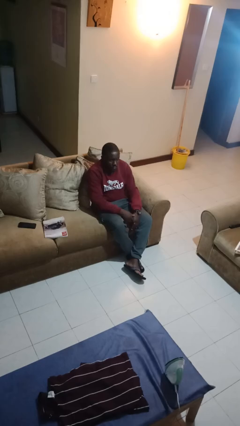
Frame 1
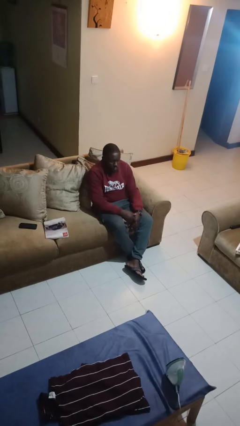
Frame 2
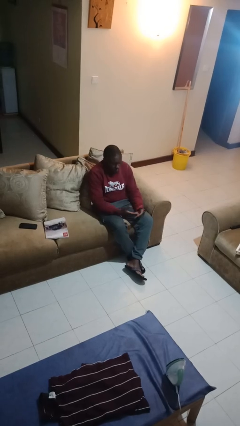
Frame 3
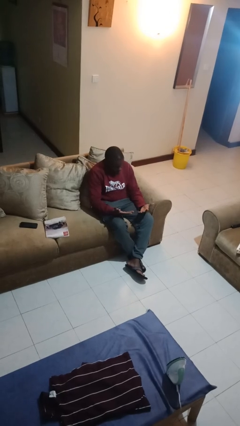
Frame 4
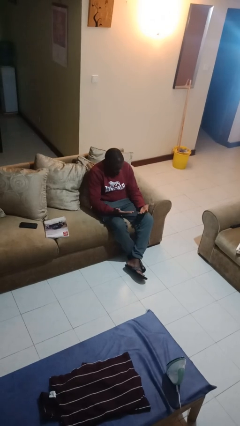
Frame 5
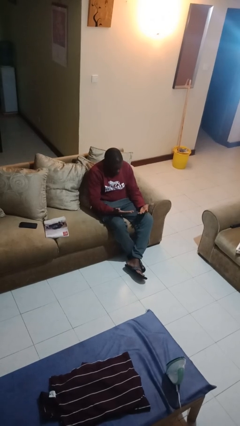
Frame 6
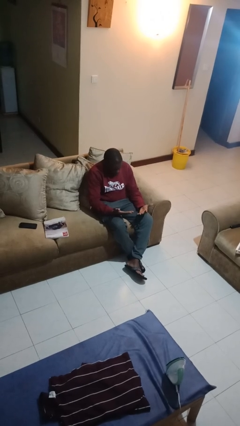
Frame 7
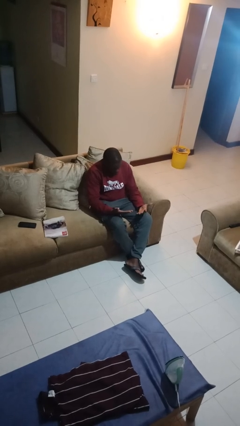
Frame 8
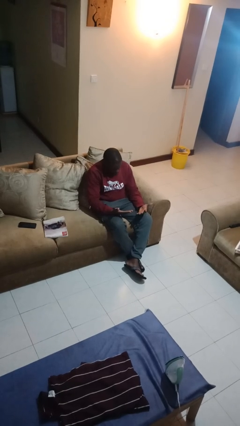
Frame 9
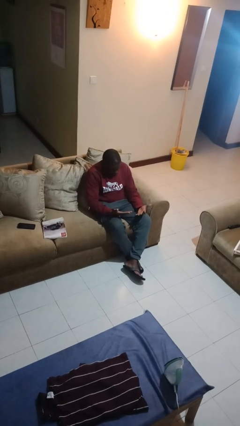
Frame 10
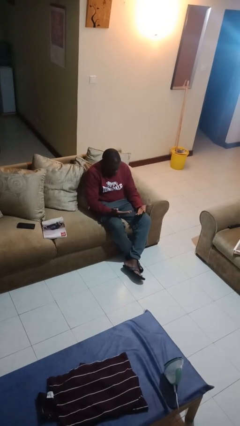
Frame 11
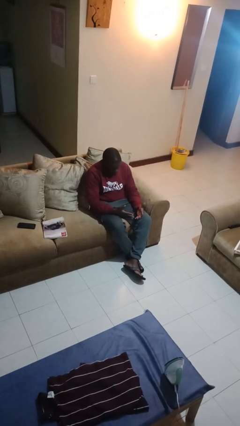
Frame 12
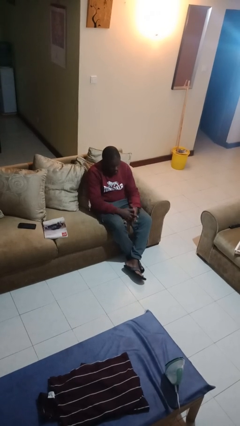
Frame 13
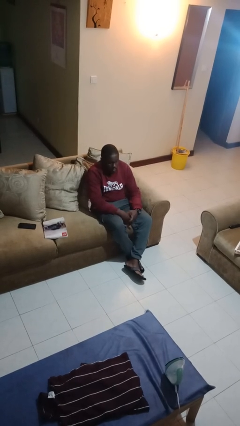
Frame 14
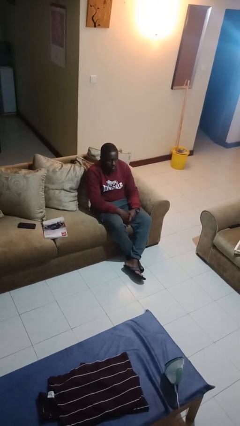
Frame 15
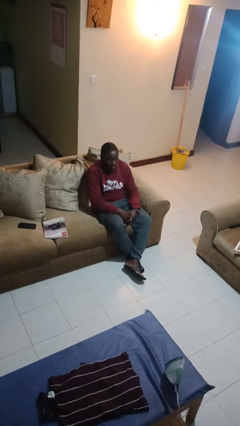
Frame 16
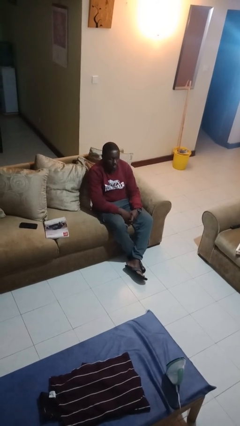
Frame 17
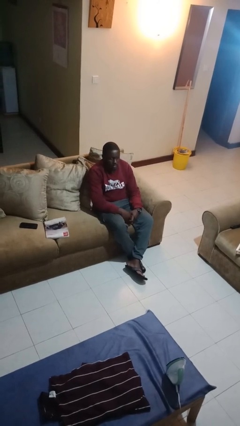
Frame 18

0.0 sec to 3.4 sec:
person looks at hands in lap

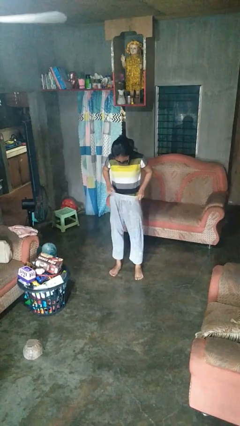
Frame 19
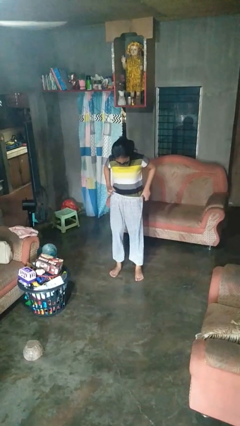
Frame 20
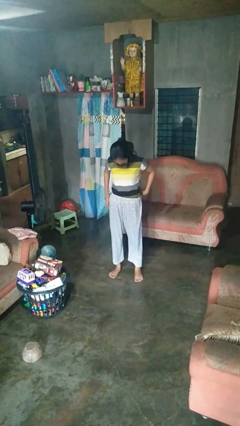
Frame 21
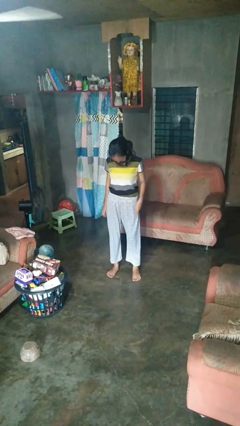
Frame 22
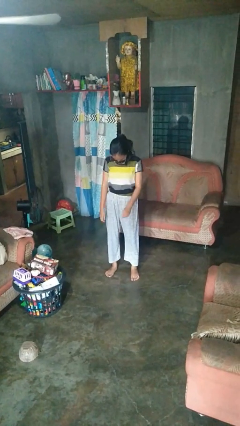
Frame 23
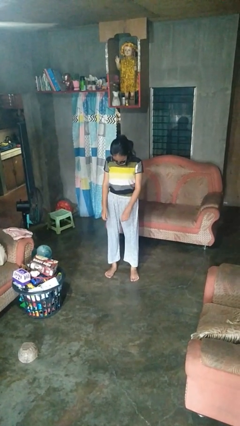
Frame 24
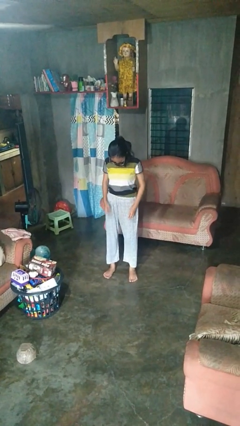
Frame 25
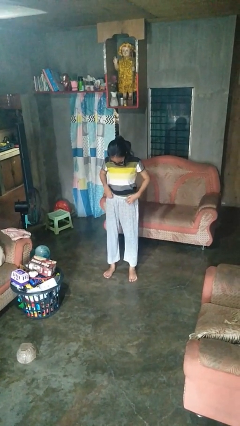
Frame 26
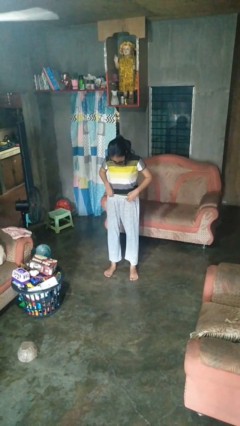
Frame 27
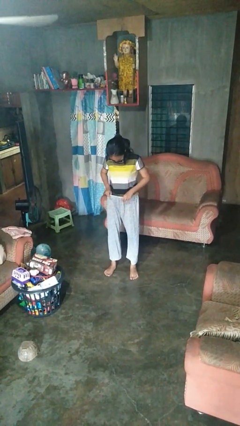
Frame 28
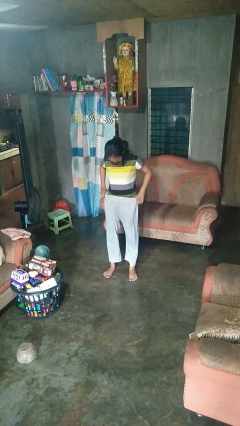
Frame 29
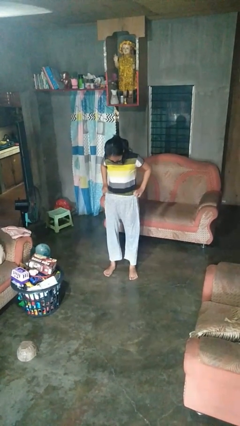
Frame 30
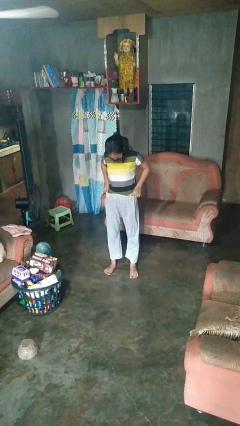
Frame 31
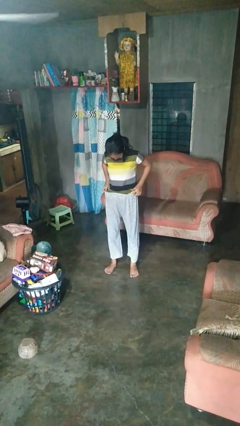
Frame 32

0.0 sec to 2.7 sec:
person untucks shirt

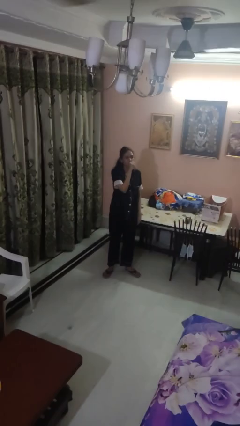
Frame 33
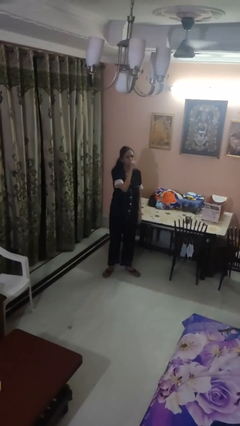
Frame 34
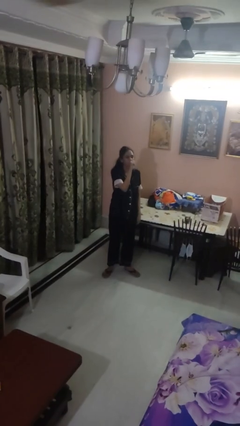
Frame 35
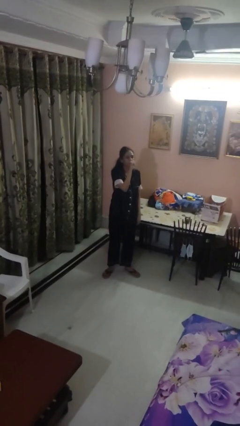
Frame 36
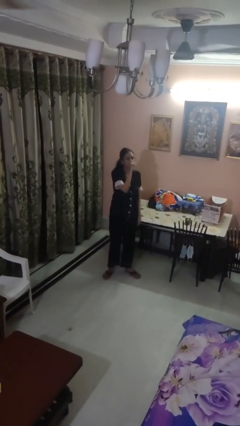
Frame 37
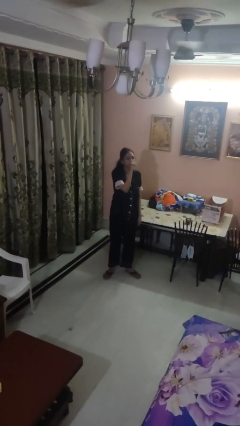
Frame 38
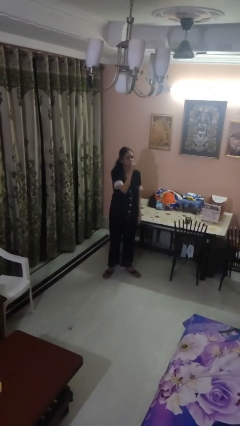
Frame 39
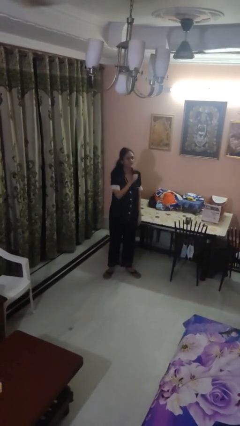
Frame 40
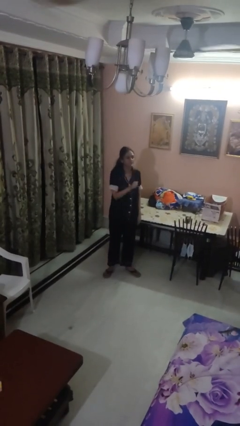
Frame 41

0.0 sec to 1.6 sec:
person vapes

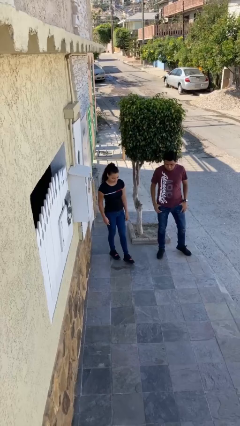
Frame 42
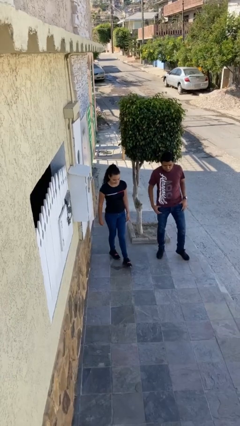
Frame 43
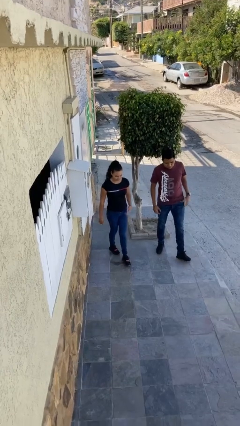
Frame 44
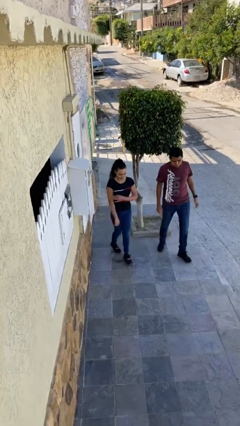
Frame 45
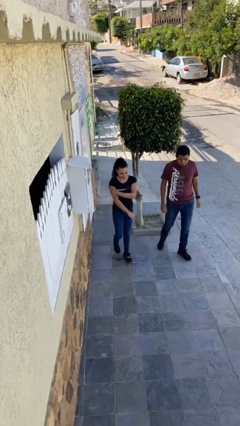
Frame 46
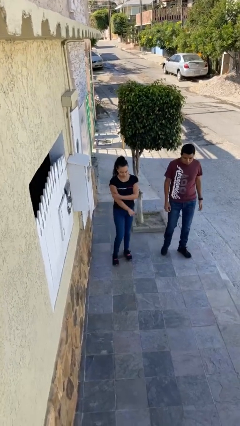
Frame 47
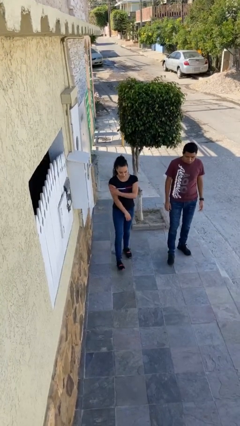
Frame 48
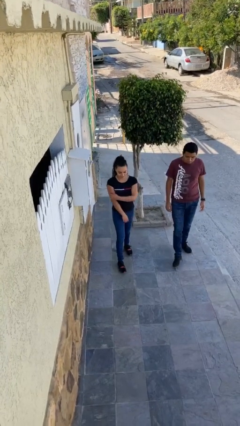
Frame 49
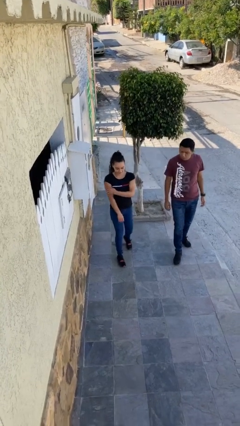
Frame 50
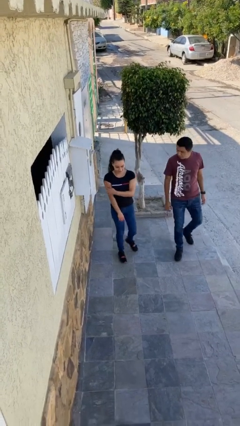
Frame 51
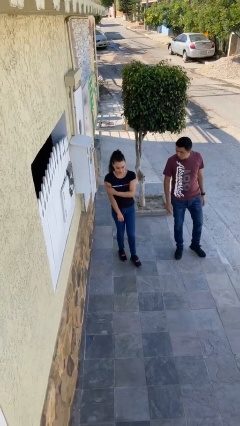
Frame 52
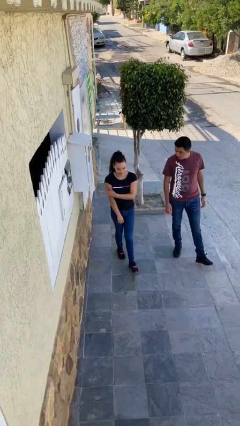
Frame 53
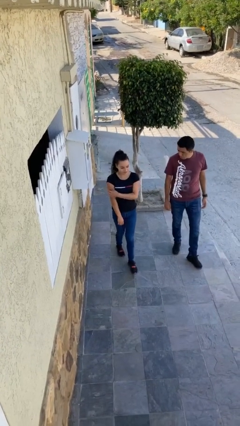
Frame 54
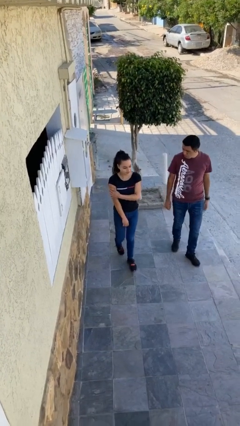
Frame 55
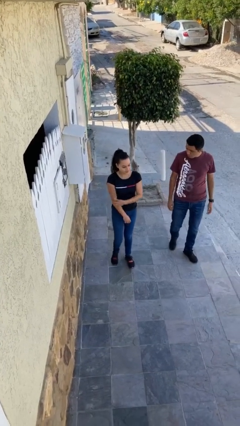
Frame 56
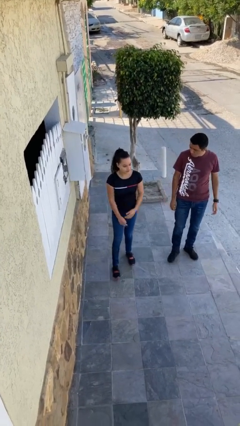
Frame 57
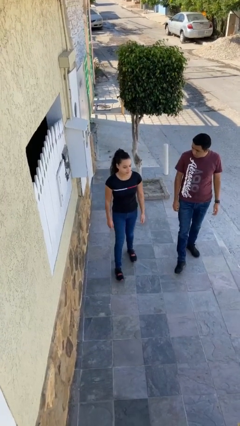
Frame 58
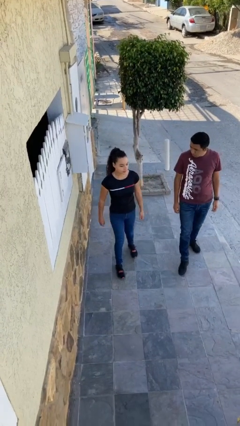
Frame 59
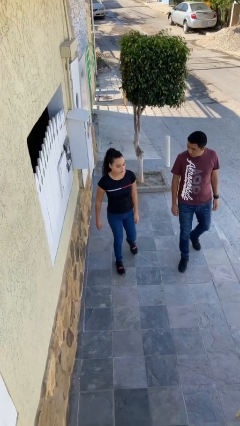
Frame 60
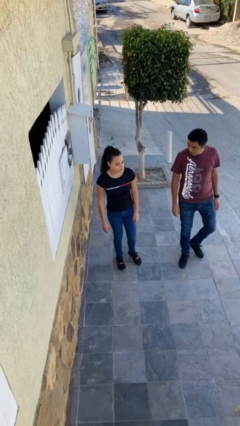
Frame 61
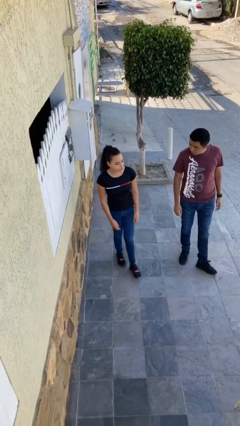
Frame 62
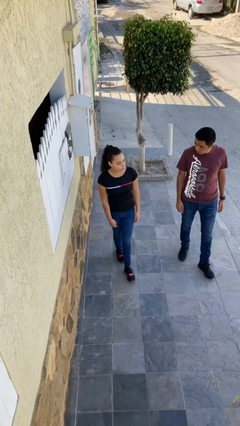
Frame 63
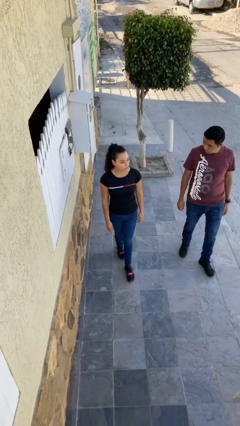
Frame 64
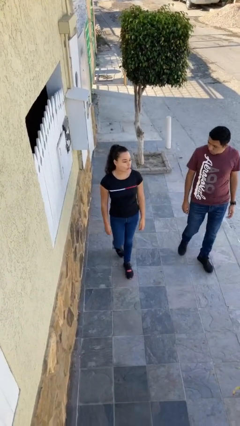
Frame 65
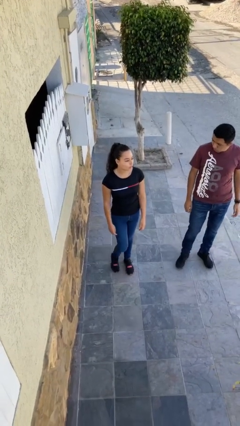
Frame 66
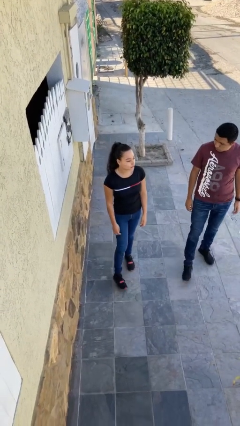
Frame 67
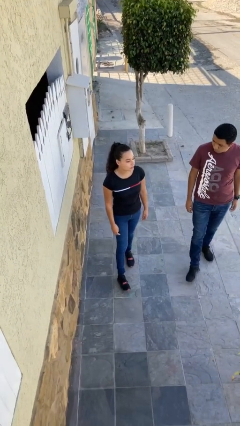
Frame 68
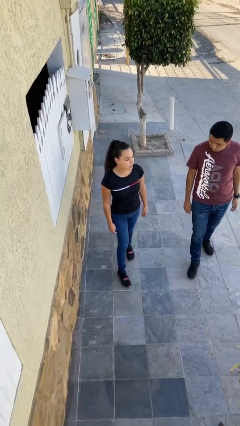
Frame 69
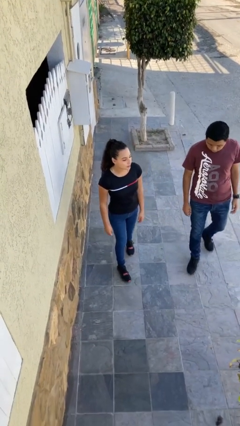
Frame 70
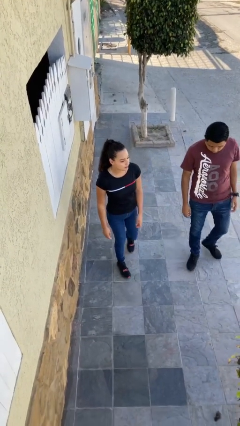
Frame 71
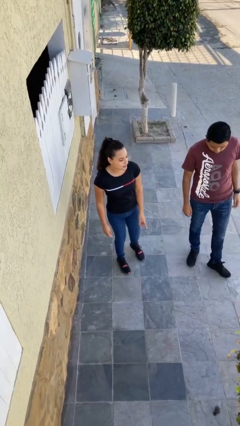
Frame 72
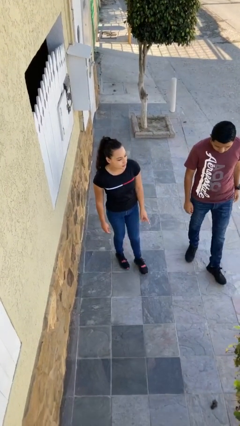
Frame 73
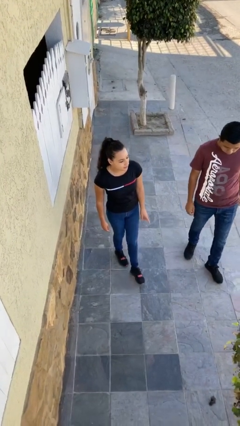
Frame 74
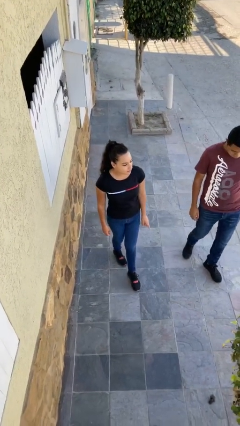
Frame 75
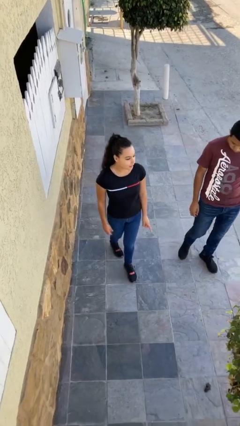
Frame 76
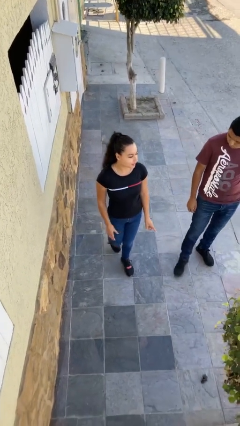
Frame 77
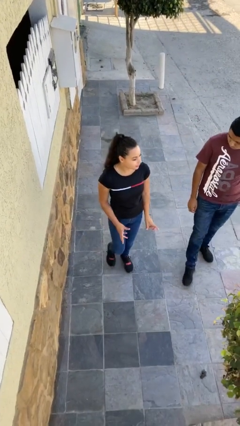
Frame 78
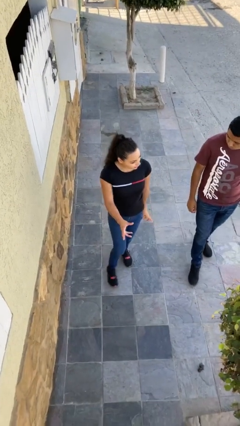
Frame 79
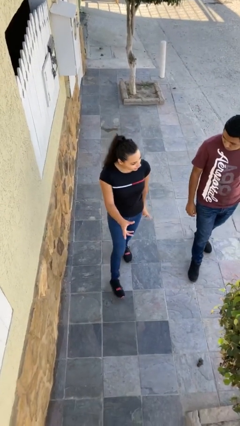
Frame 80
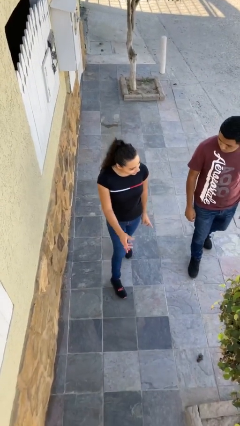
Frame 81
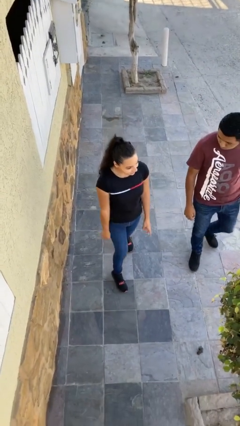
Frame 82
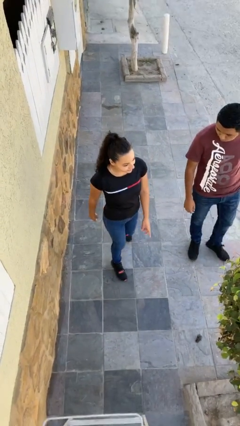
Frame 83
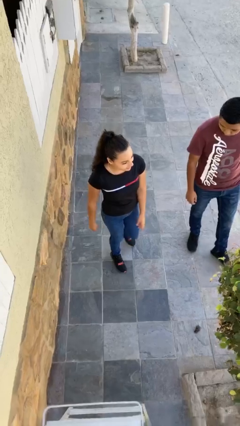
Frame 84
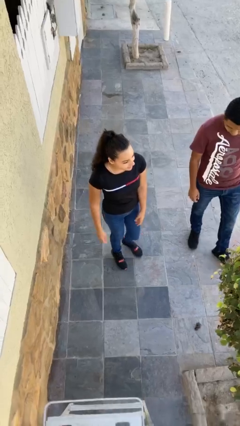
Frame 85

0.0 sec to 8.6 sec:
person talks to person

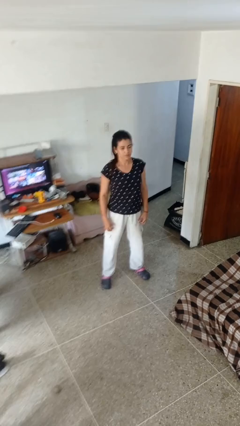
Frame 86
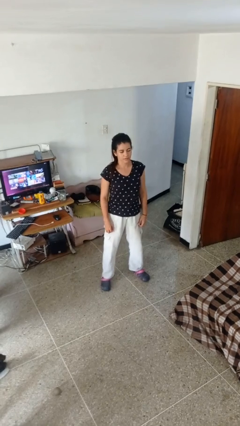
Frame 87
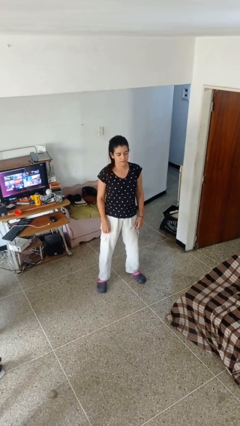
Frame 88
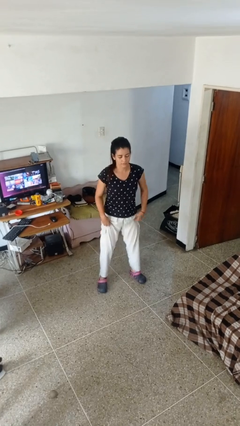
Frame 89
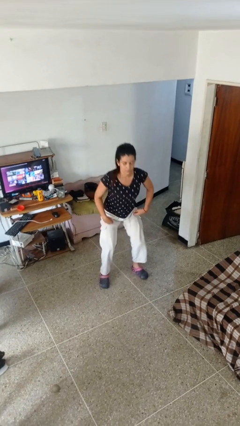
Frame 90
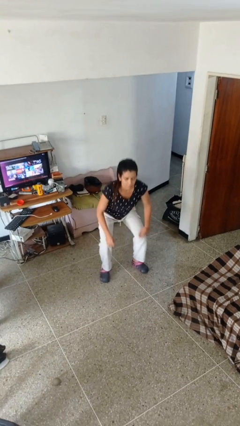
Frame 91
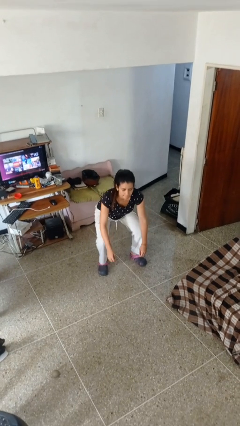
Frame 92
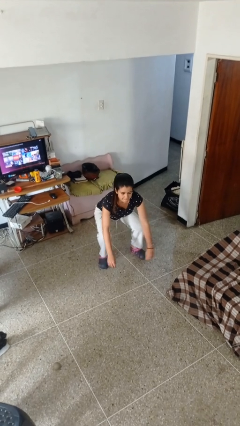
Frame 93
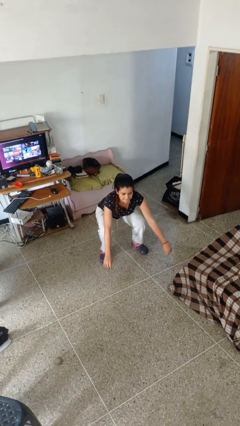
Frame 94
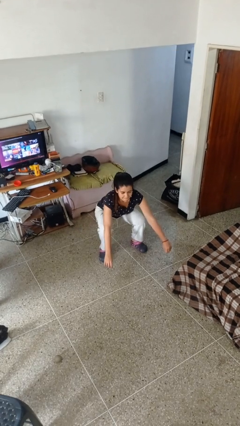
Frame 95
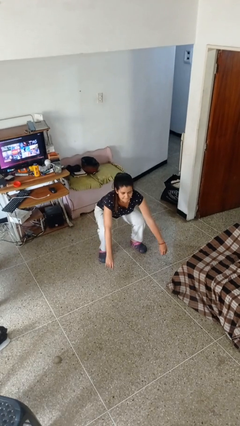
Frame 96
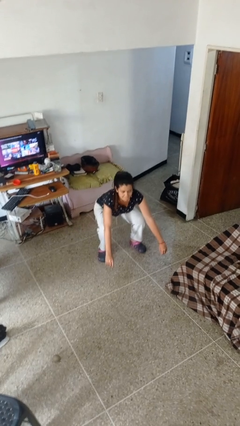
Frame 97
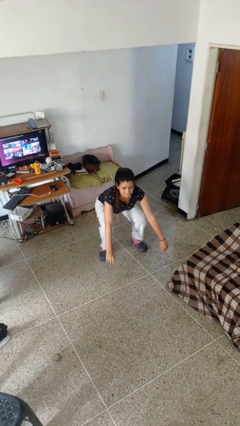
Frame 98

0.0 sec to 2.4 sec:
person squats
